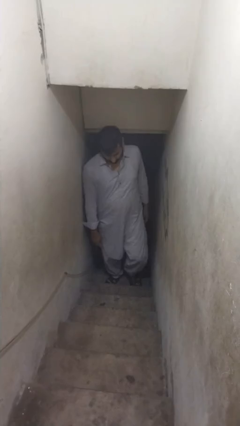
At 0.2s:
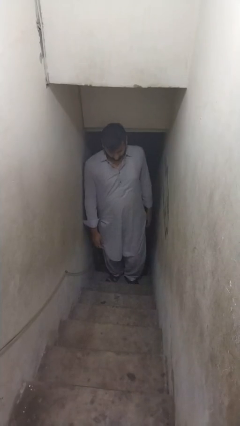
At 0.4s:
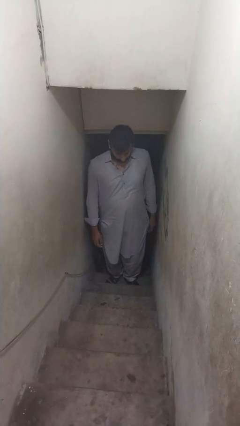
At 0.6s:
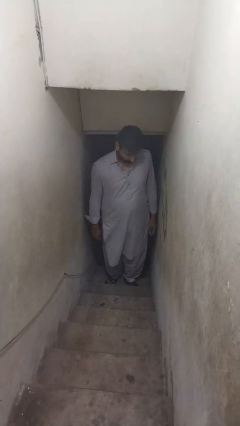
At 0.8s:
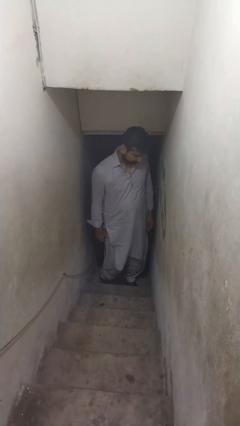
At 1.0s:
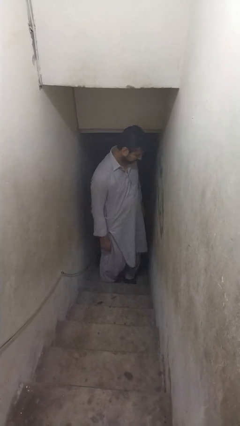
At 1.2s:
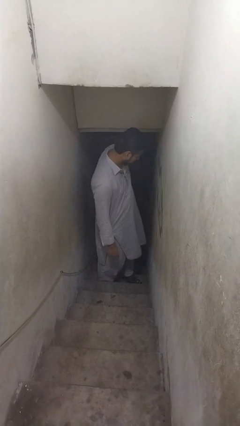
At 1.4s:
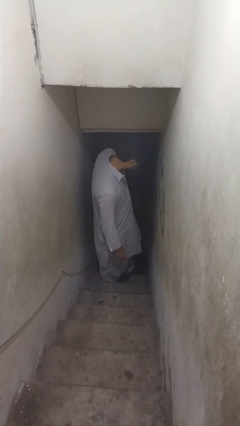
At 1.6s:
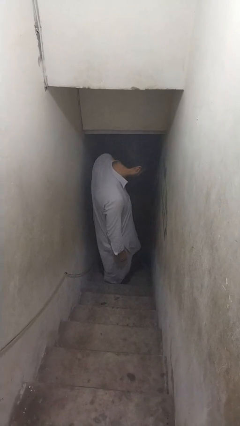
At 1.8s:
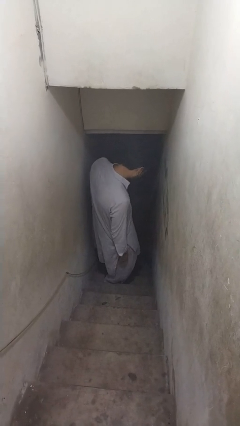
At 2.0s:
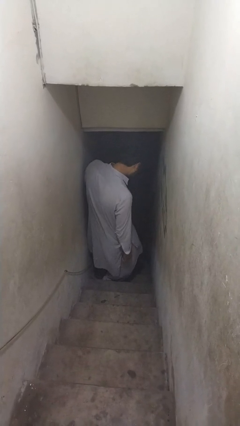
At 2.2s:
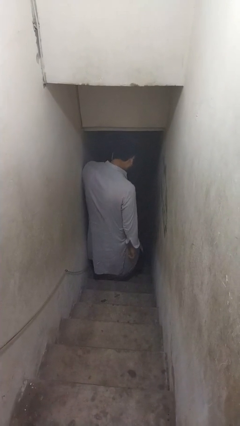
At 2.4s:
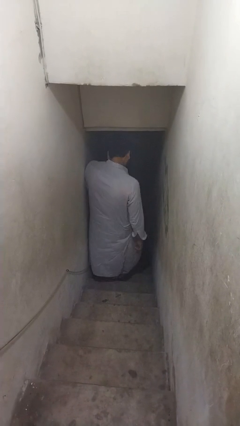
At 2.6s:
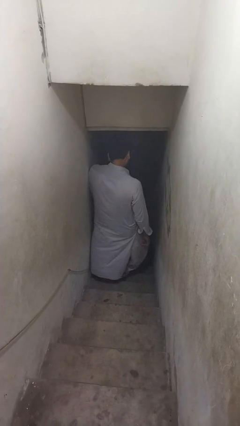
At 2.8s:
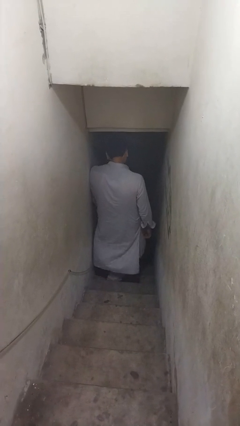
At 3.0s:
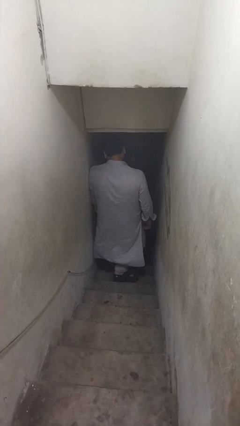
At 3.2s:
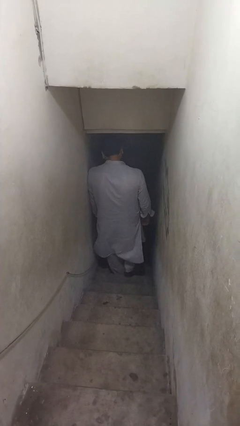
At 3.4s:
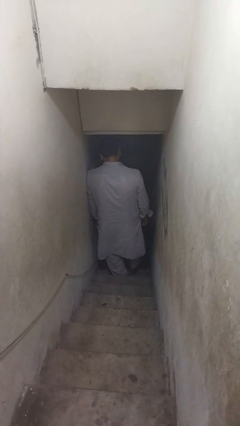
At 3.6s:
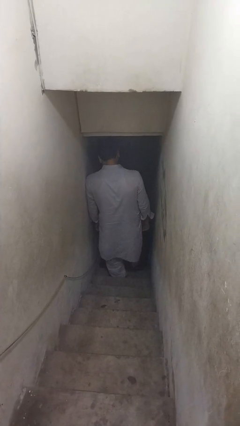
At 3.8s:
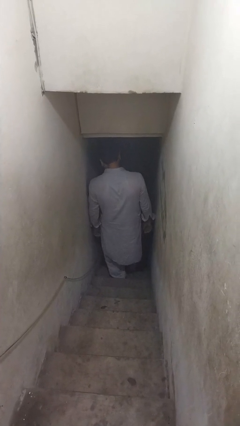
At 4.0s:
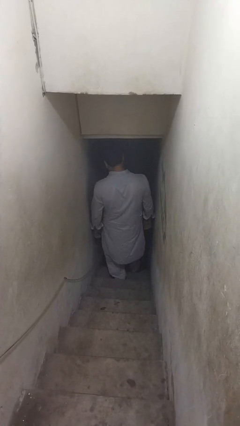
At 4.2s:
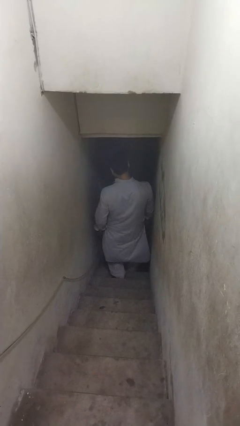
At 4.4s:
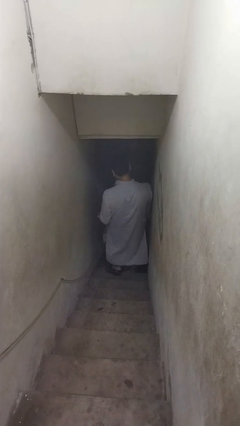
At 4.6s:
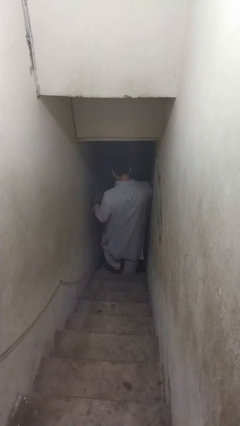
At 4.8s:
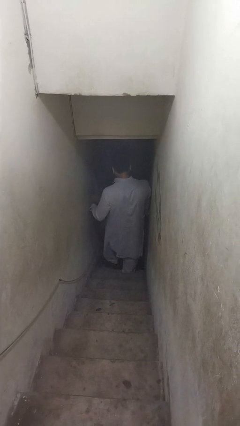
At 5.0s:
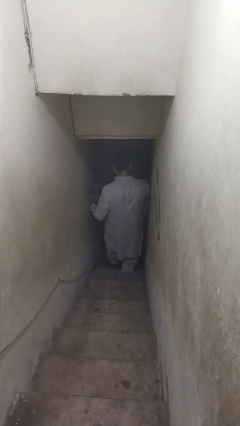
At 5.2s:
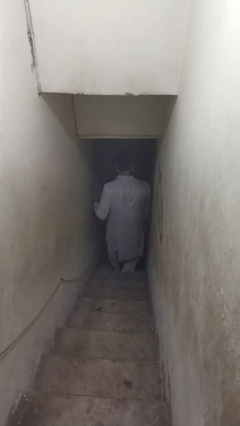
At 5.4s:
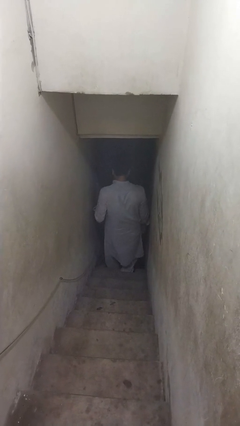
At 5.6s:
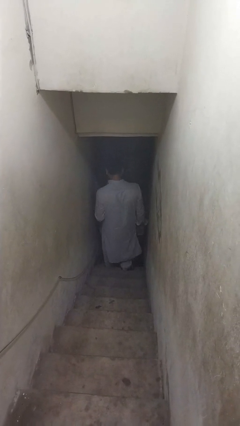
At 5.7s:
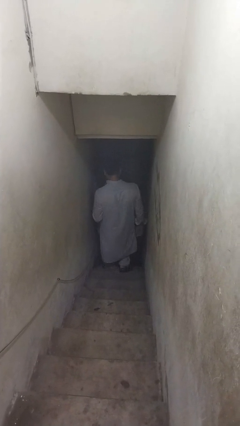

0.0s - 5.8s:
person climbs down stairs

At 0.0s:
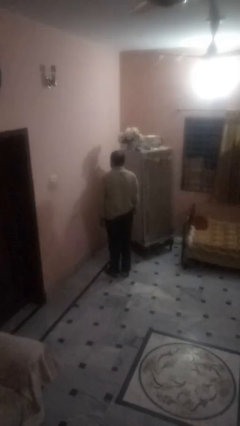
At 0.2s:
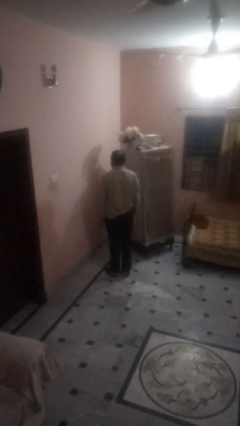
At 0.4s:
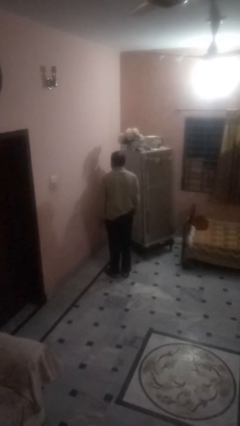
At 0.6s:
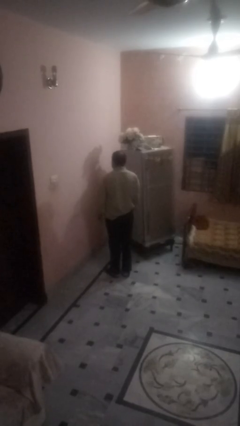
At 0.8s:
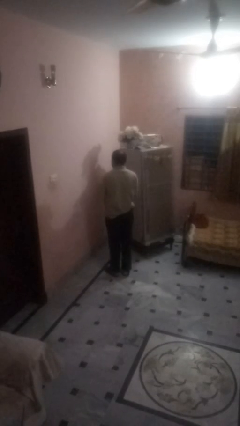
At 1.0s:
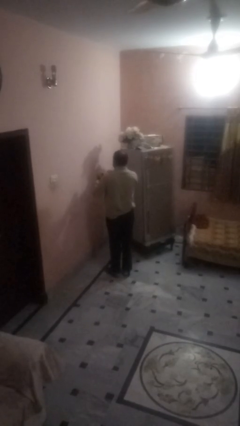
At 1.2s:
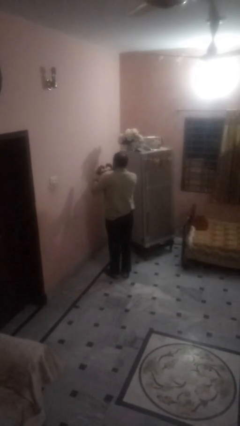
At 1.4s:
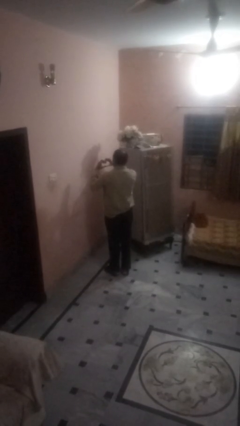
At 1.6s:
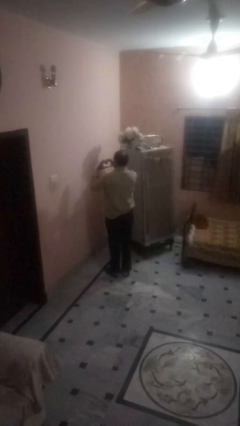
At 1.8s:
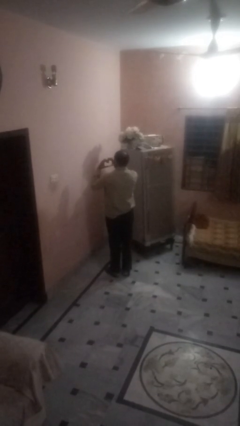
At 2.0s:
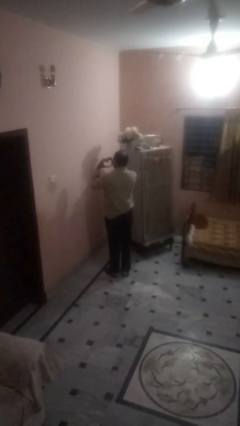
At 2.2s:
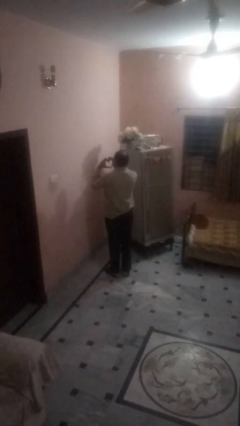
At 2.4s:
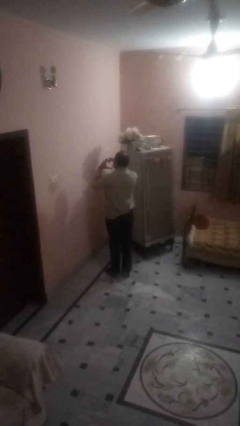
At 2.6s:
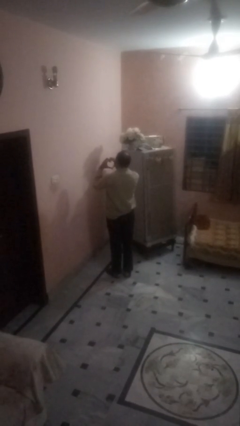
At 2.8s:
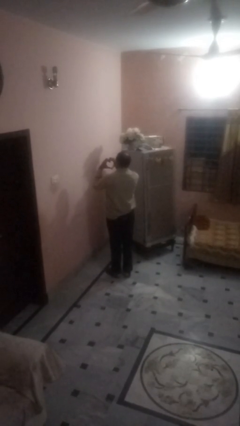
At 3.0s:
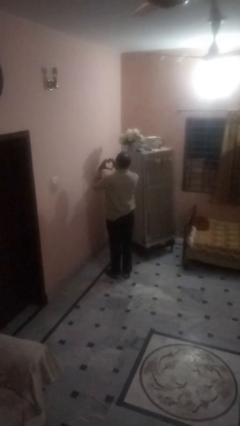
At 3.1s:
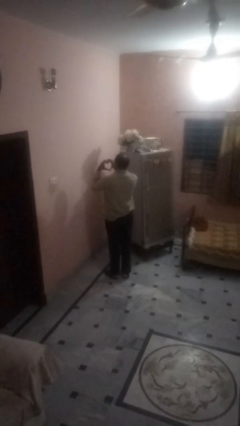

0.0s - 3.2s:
person gestures heart

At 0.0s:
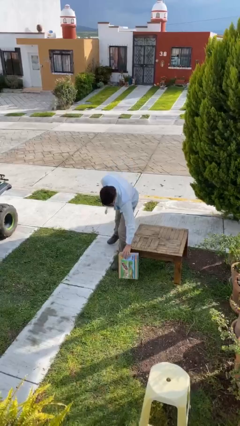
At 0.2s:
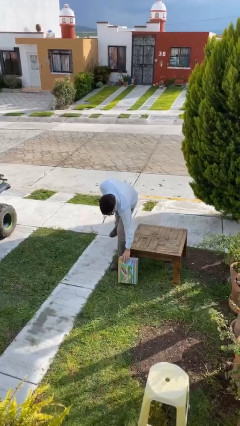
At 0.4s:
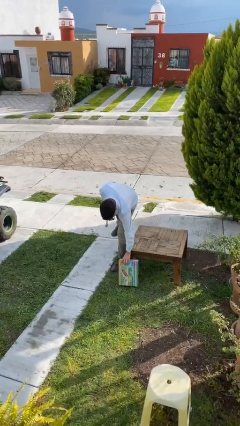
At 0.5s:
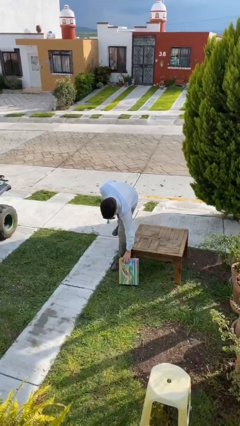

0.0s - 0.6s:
person puts down object on floor

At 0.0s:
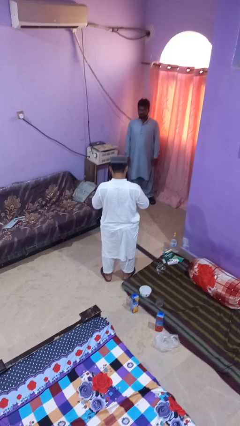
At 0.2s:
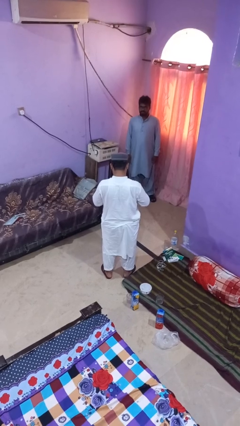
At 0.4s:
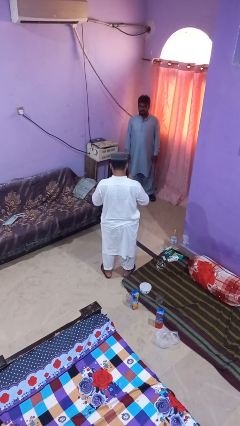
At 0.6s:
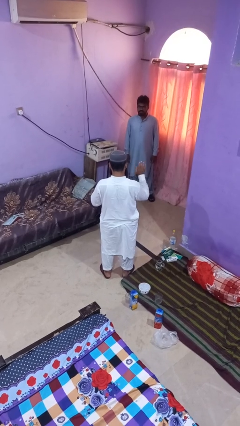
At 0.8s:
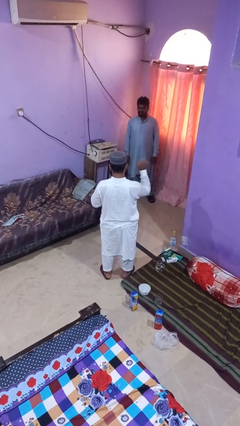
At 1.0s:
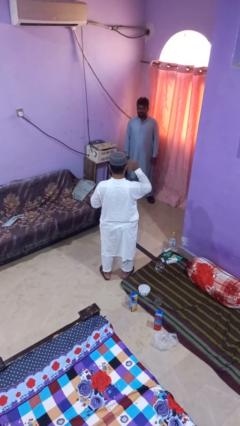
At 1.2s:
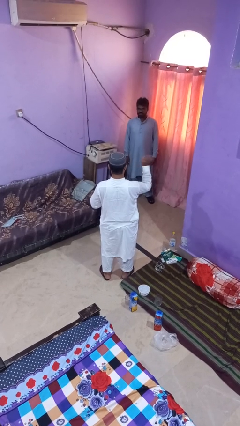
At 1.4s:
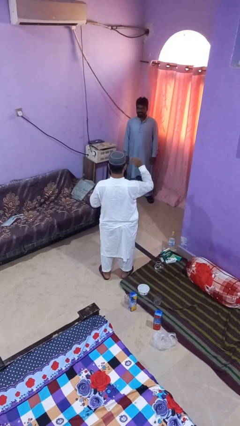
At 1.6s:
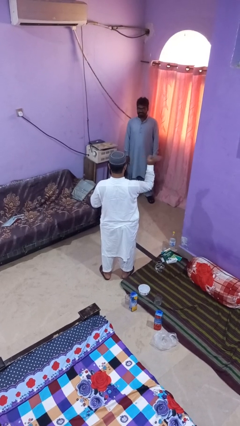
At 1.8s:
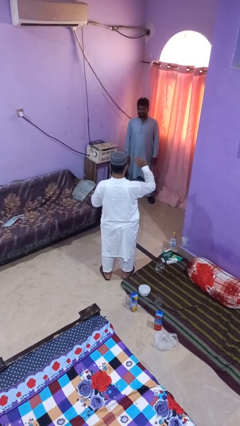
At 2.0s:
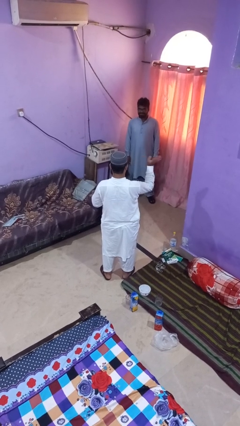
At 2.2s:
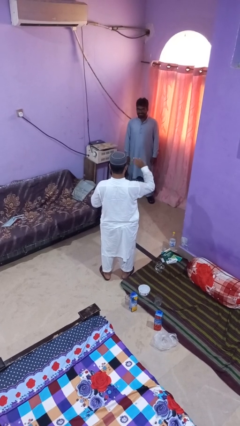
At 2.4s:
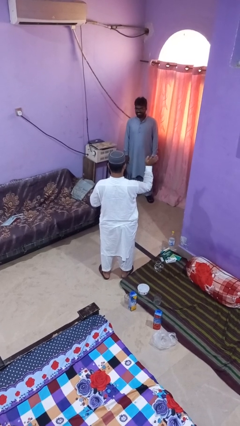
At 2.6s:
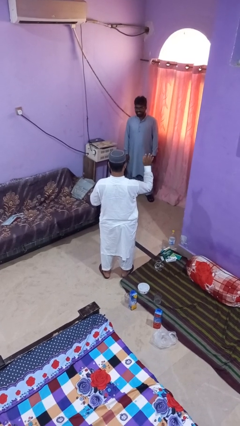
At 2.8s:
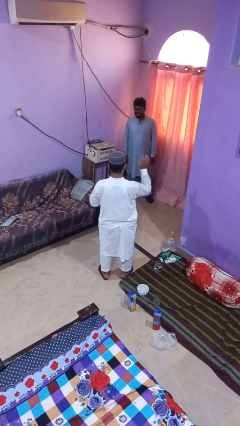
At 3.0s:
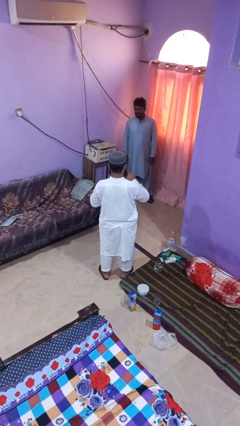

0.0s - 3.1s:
person waves at person

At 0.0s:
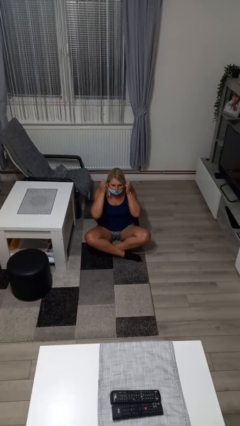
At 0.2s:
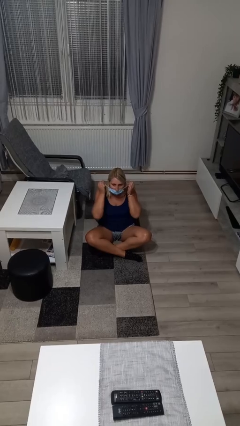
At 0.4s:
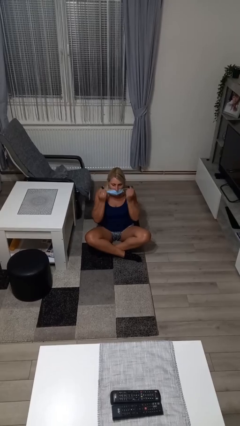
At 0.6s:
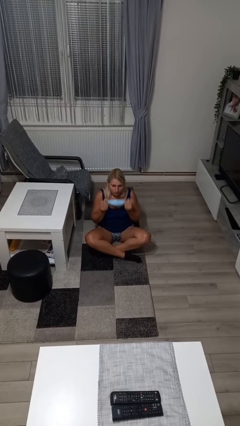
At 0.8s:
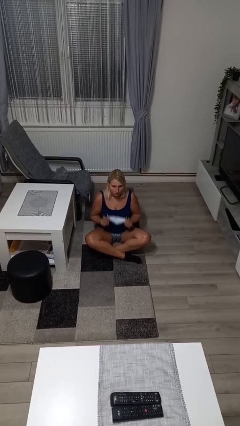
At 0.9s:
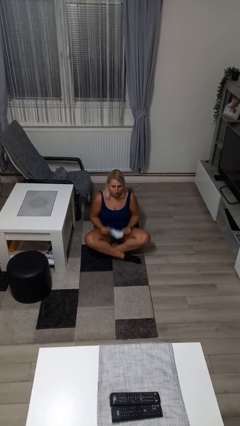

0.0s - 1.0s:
person takes off facemask

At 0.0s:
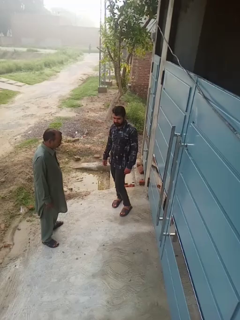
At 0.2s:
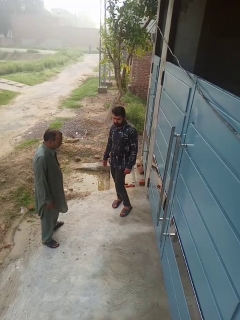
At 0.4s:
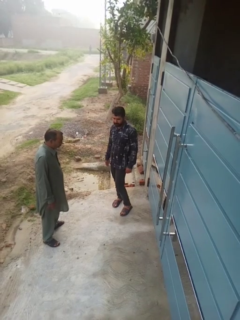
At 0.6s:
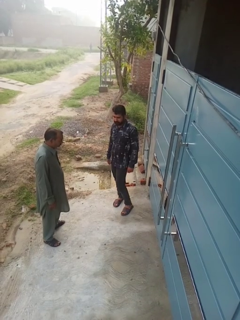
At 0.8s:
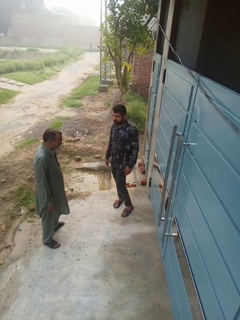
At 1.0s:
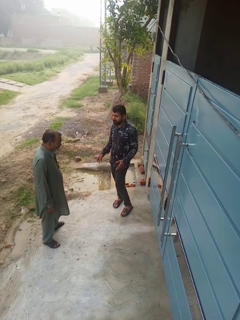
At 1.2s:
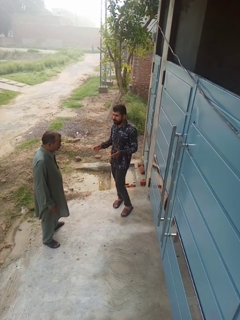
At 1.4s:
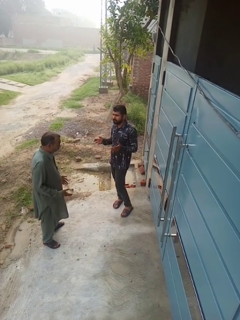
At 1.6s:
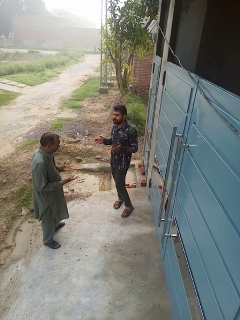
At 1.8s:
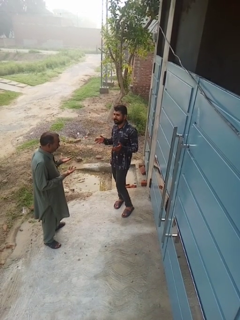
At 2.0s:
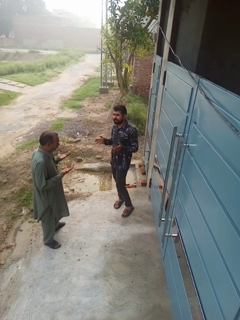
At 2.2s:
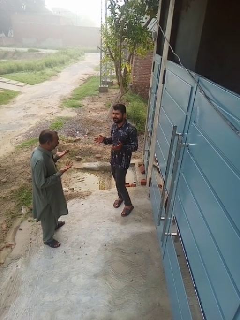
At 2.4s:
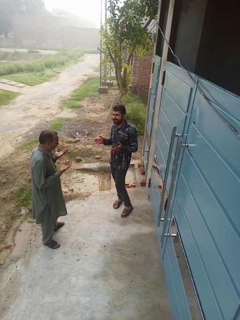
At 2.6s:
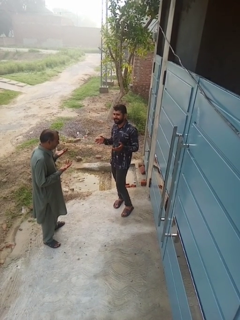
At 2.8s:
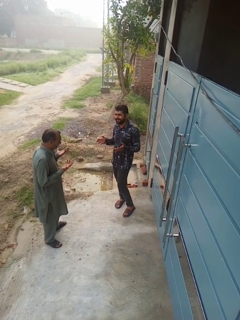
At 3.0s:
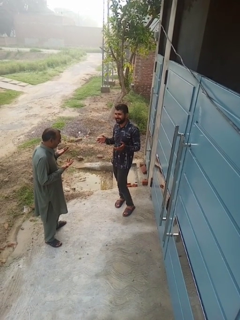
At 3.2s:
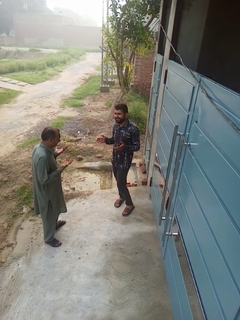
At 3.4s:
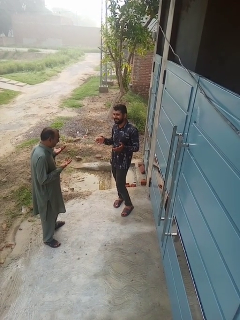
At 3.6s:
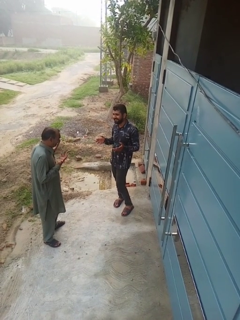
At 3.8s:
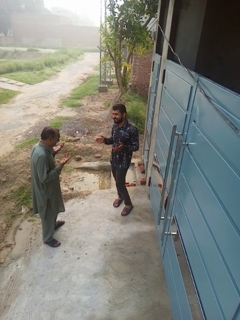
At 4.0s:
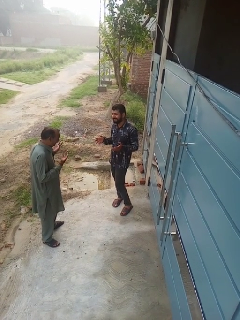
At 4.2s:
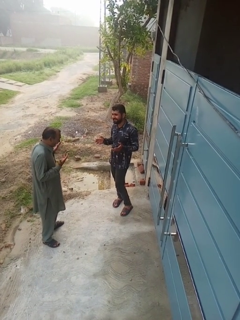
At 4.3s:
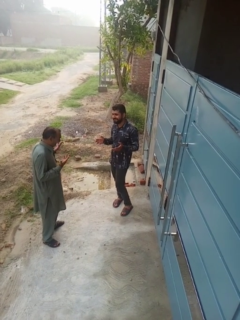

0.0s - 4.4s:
person laughs with person

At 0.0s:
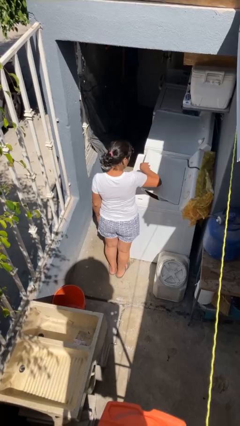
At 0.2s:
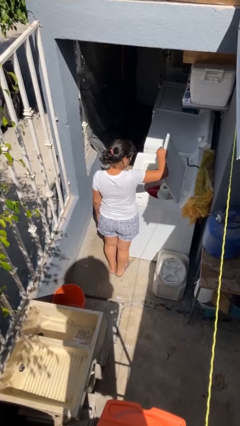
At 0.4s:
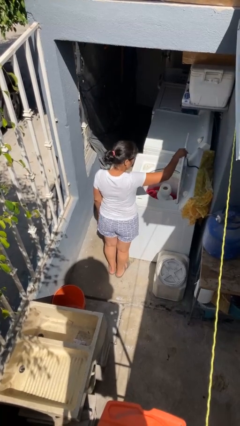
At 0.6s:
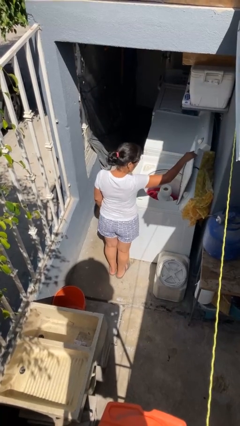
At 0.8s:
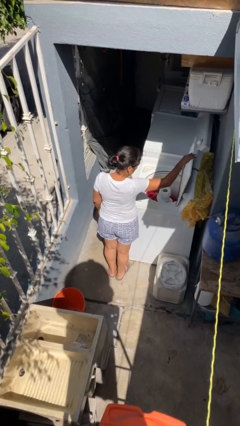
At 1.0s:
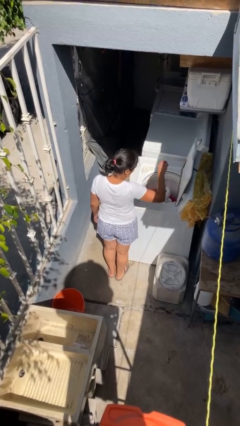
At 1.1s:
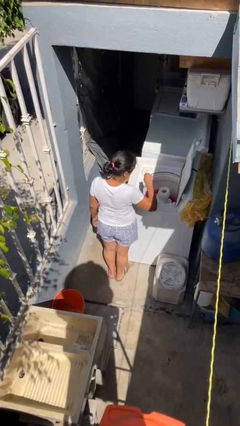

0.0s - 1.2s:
person opens clothes washer
